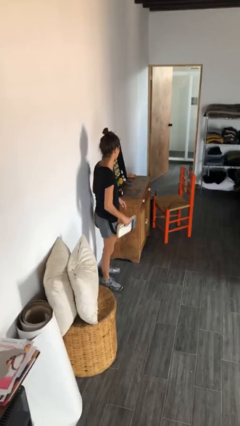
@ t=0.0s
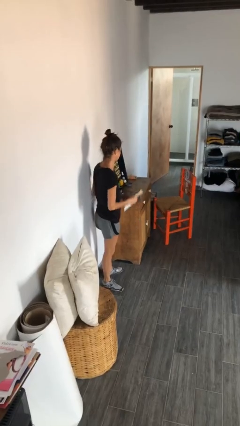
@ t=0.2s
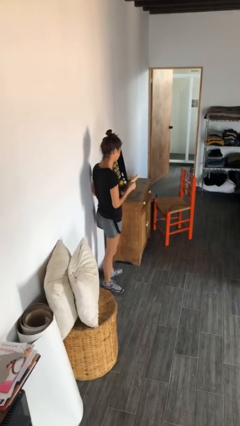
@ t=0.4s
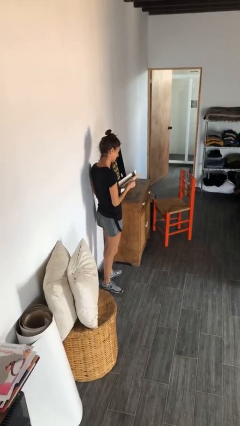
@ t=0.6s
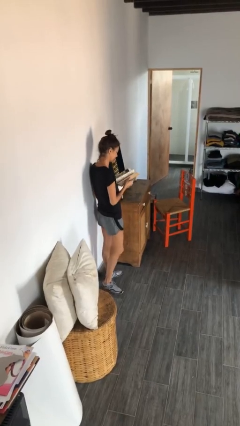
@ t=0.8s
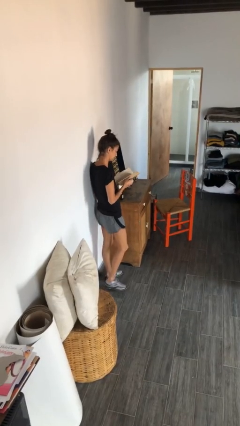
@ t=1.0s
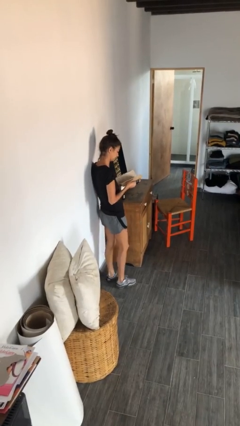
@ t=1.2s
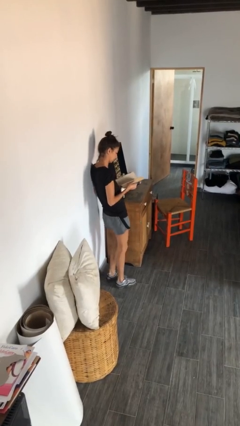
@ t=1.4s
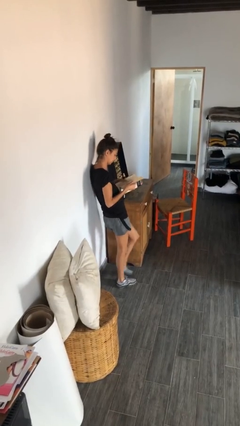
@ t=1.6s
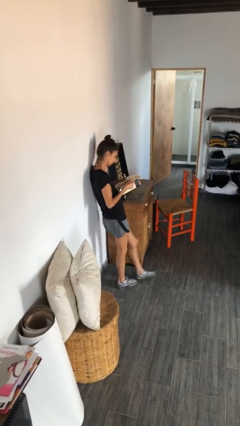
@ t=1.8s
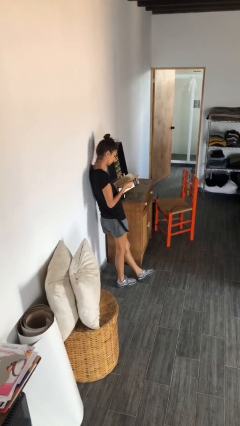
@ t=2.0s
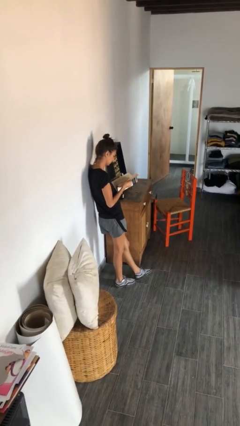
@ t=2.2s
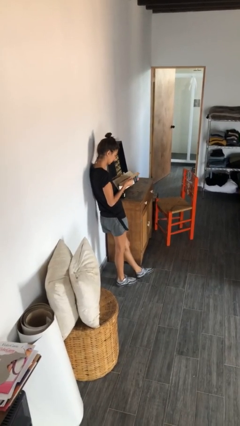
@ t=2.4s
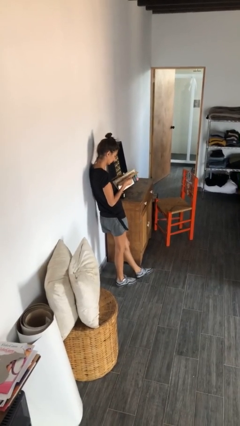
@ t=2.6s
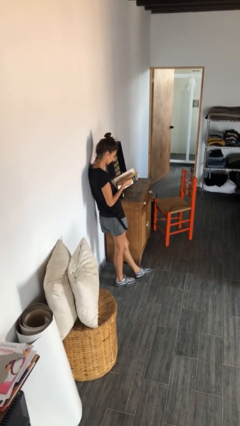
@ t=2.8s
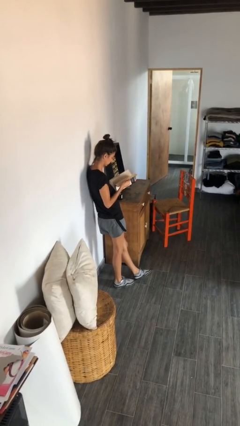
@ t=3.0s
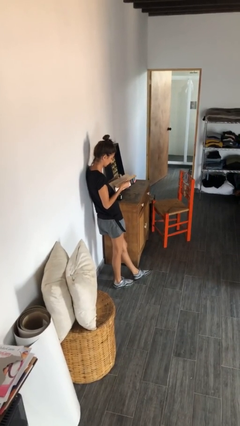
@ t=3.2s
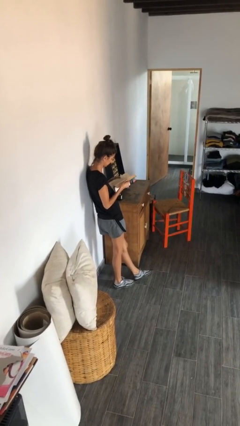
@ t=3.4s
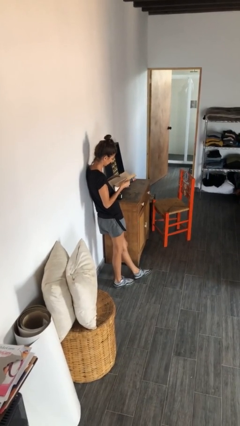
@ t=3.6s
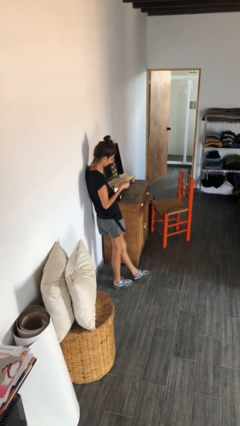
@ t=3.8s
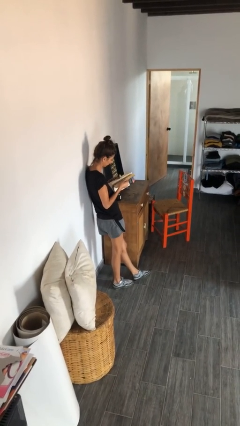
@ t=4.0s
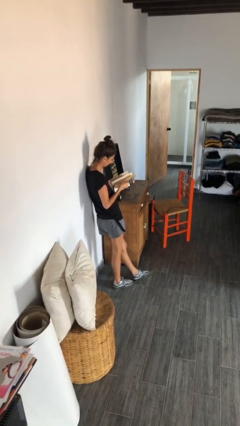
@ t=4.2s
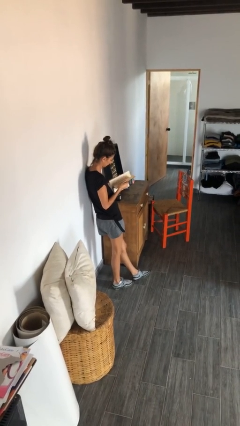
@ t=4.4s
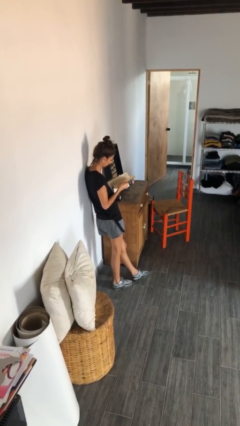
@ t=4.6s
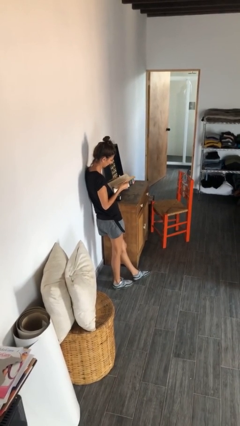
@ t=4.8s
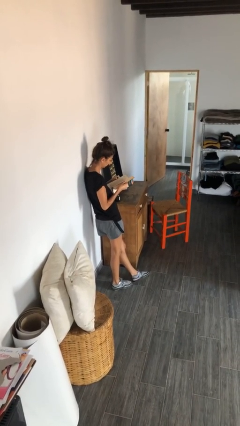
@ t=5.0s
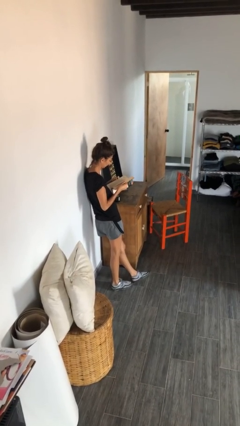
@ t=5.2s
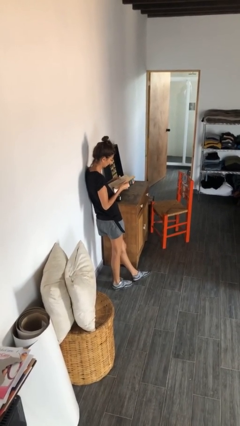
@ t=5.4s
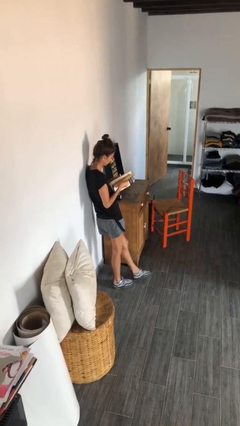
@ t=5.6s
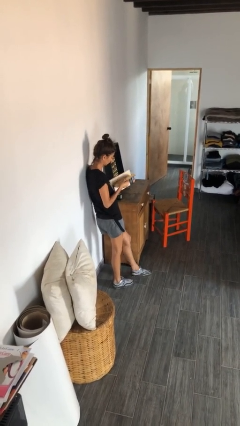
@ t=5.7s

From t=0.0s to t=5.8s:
person reads book

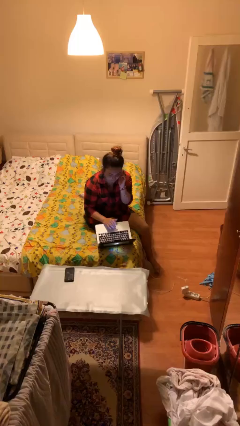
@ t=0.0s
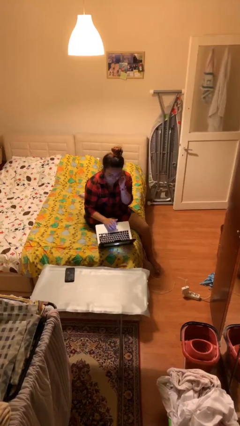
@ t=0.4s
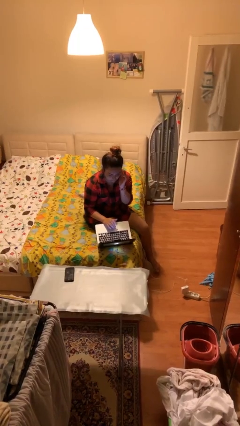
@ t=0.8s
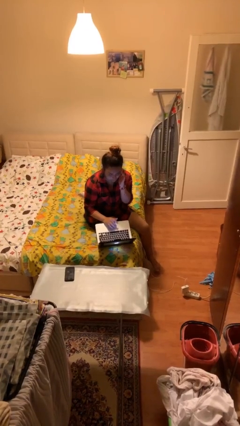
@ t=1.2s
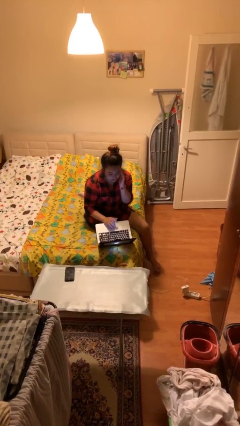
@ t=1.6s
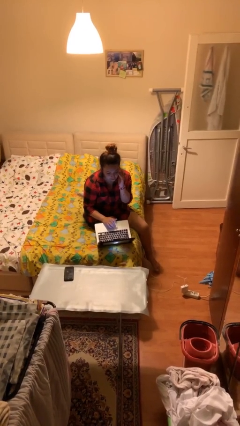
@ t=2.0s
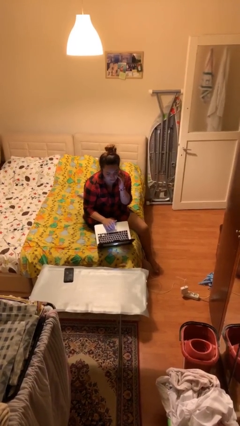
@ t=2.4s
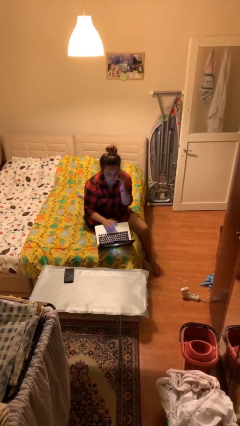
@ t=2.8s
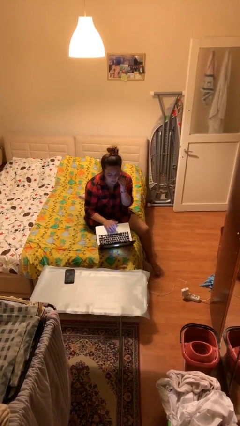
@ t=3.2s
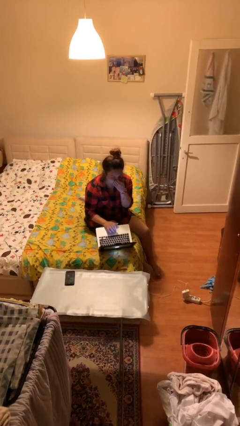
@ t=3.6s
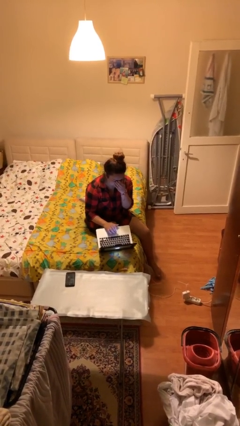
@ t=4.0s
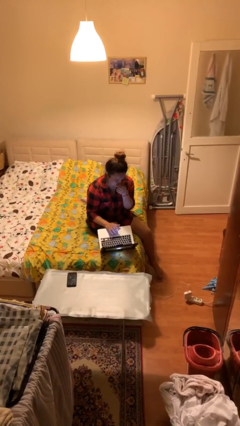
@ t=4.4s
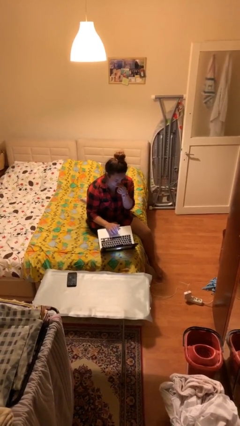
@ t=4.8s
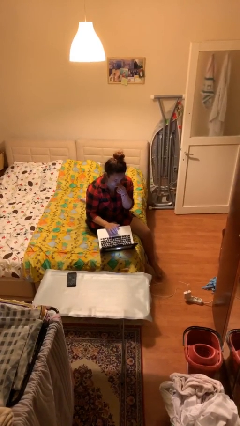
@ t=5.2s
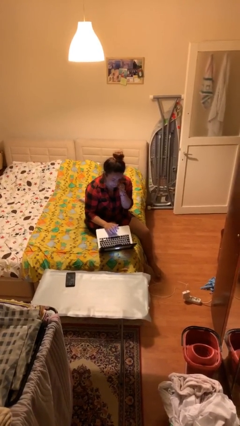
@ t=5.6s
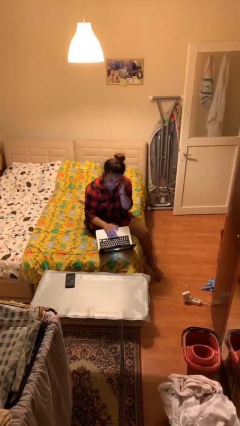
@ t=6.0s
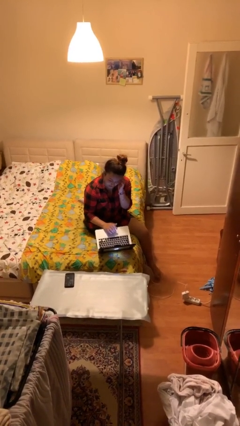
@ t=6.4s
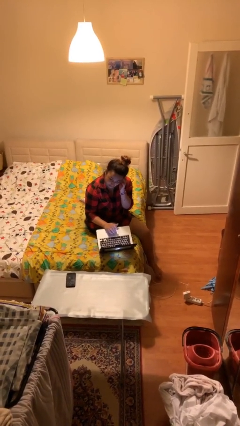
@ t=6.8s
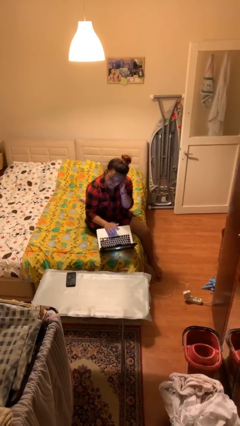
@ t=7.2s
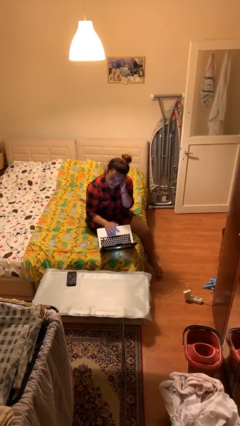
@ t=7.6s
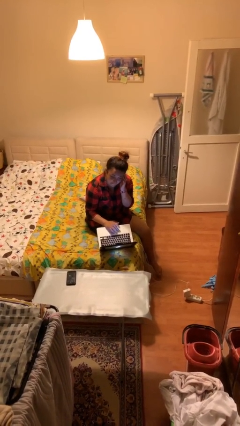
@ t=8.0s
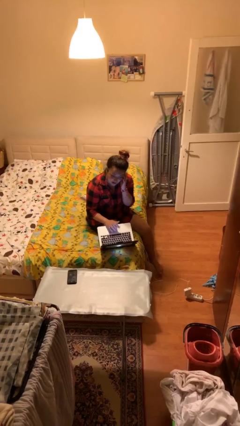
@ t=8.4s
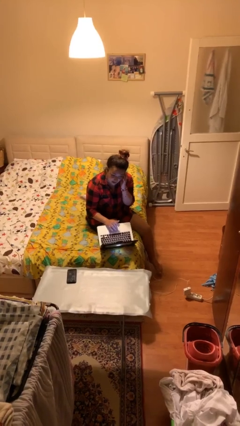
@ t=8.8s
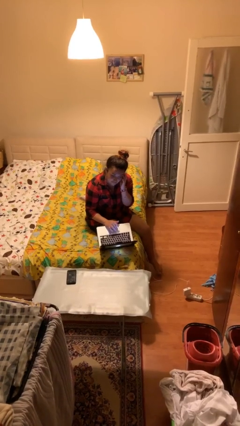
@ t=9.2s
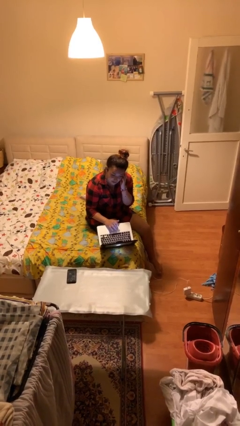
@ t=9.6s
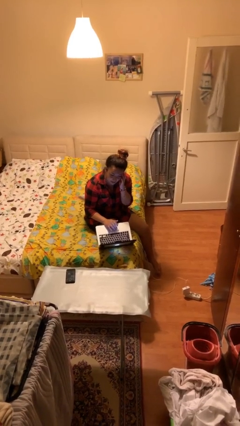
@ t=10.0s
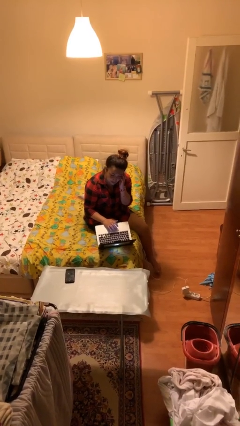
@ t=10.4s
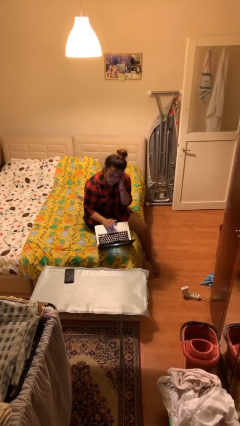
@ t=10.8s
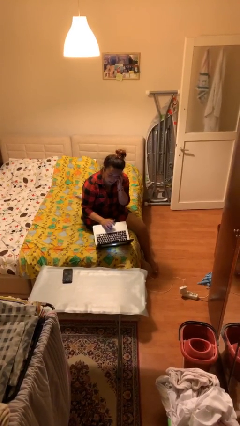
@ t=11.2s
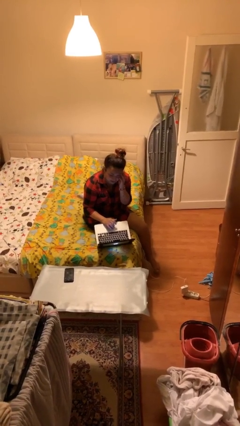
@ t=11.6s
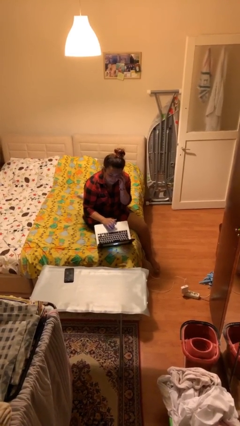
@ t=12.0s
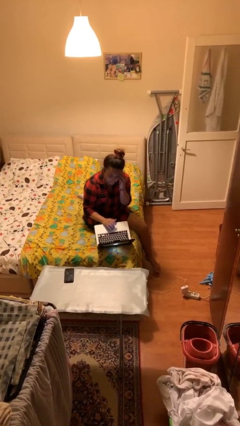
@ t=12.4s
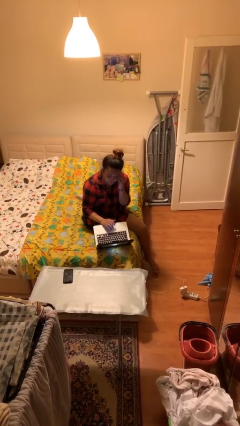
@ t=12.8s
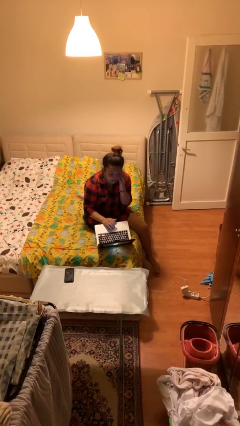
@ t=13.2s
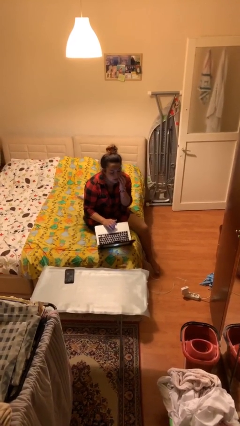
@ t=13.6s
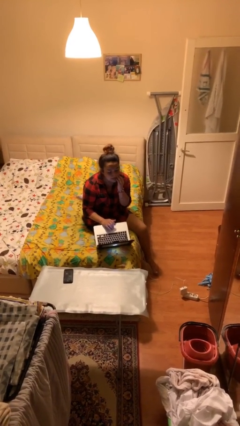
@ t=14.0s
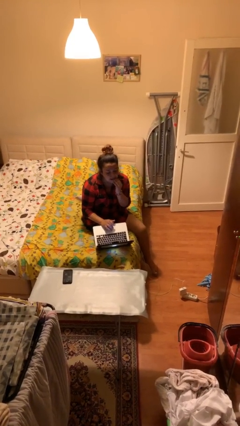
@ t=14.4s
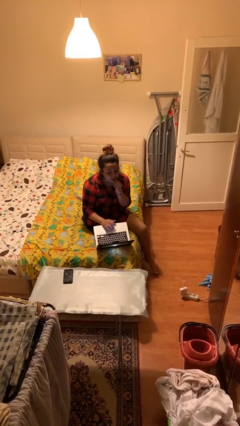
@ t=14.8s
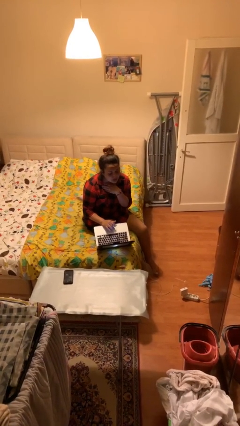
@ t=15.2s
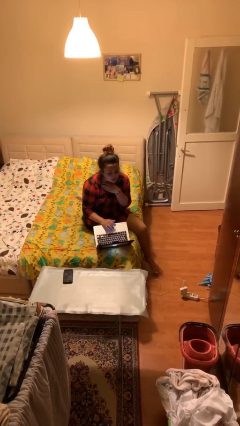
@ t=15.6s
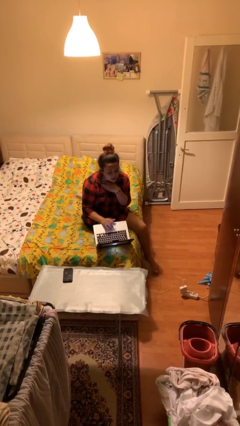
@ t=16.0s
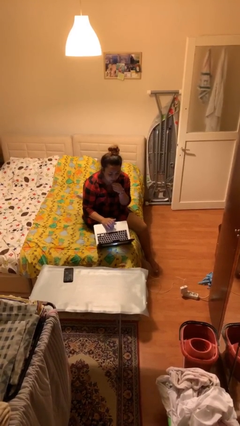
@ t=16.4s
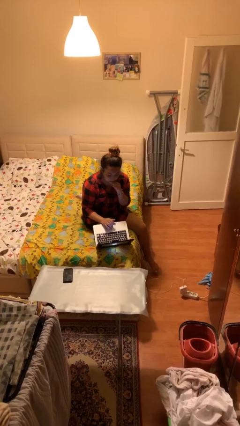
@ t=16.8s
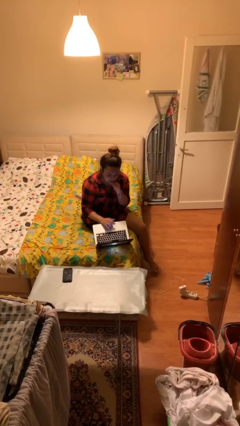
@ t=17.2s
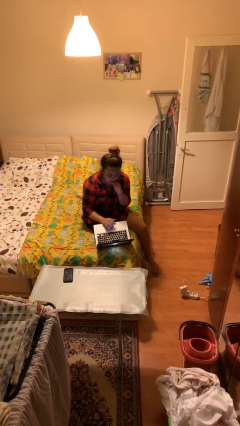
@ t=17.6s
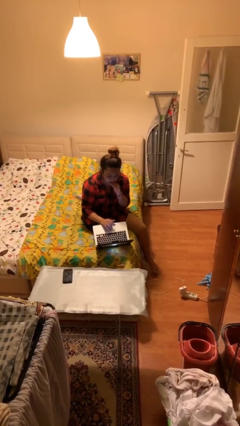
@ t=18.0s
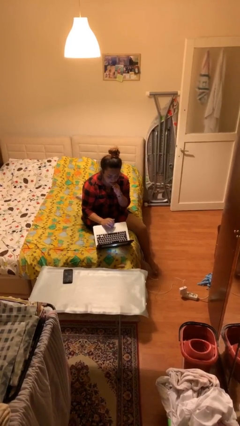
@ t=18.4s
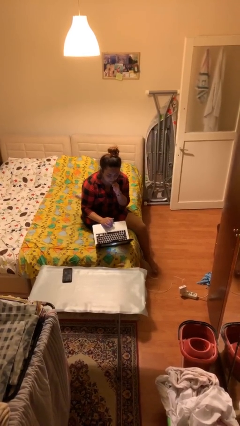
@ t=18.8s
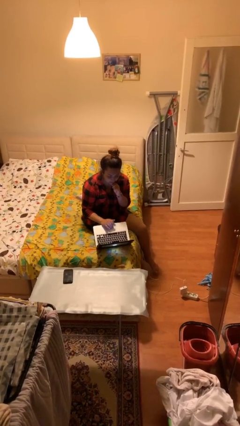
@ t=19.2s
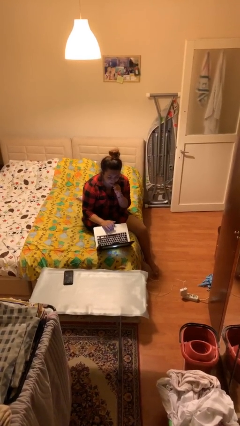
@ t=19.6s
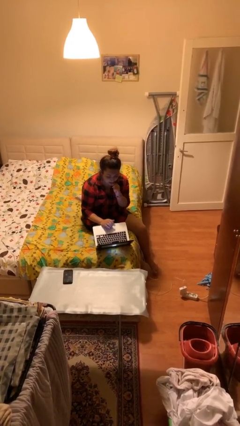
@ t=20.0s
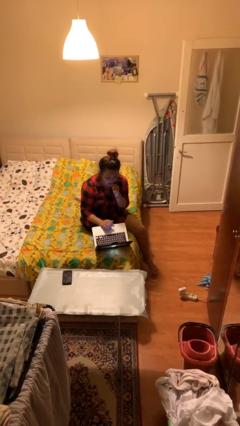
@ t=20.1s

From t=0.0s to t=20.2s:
person interacts with laptop

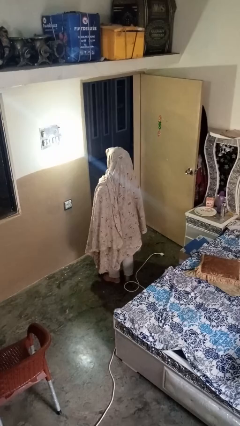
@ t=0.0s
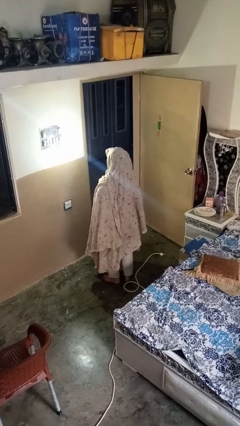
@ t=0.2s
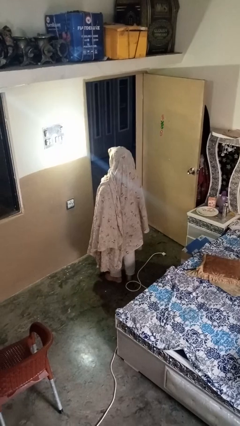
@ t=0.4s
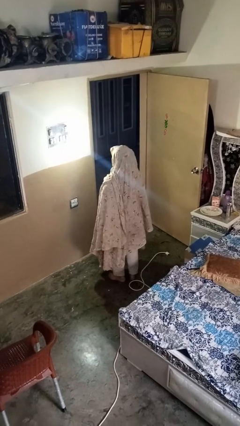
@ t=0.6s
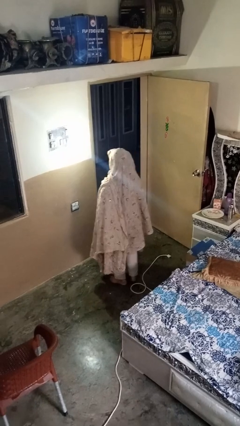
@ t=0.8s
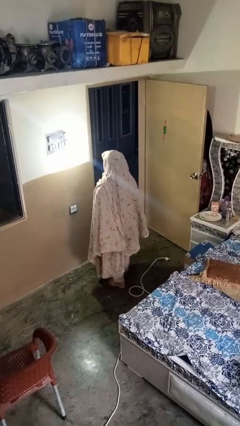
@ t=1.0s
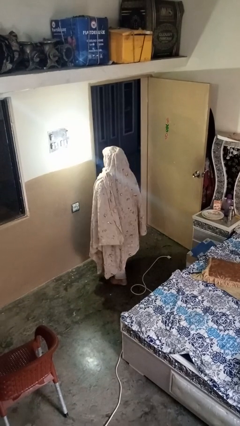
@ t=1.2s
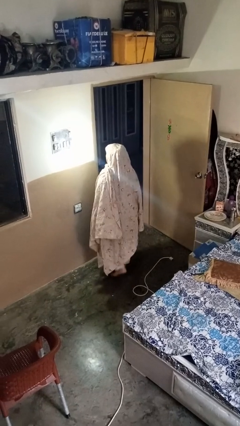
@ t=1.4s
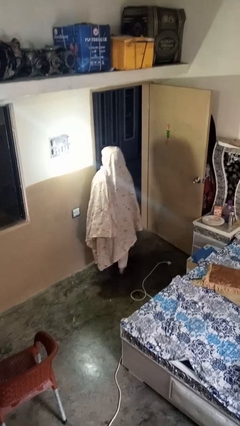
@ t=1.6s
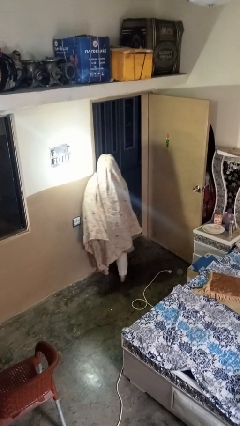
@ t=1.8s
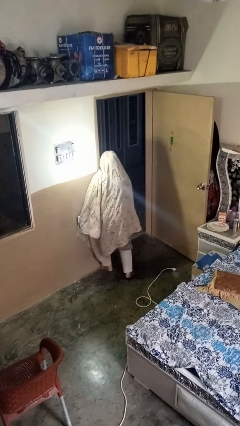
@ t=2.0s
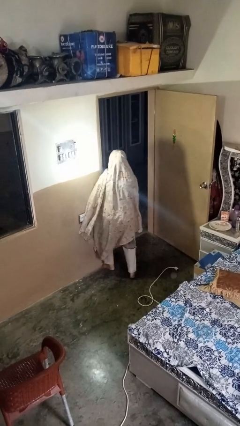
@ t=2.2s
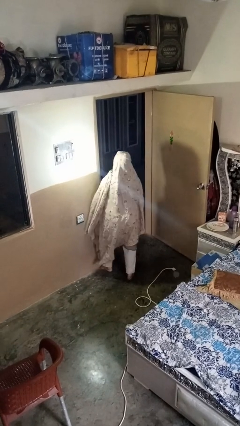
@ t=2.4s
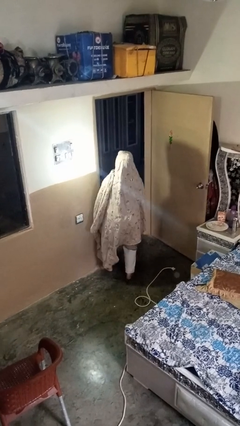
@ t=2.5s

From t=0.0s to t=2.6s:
person bumps into wall
